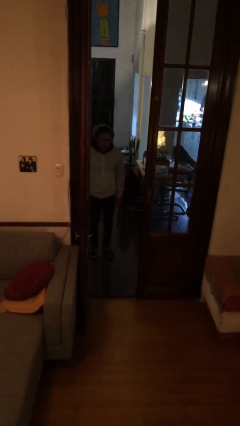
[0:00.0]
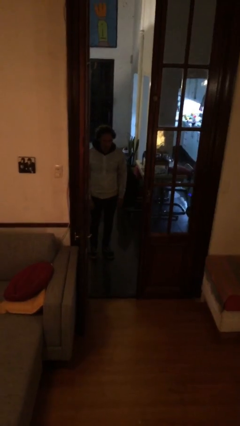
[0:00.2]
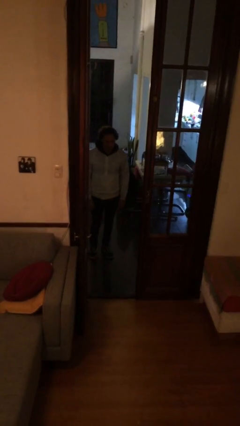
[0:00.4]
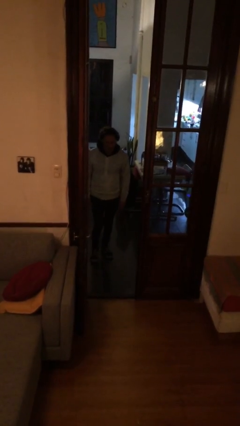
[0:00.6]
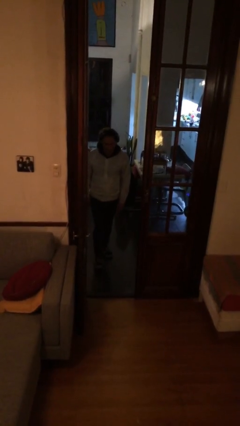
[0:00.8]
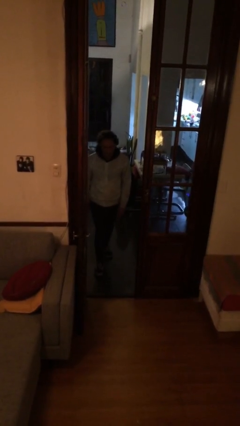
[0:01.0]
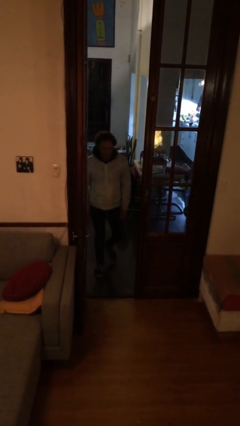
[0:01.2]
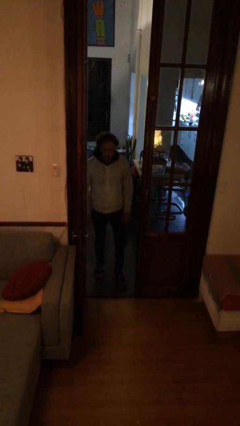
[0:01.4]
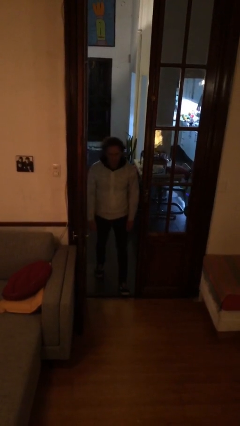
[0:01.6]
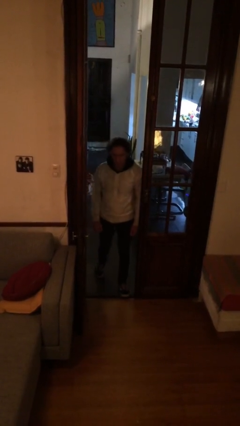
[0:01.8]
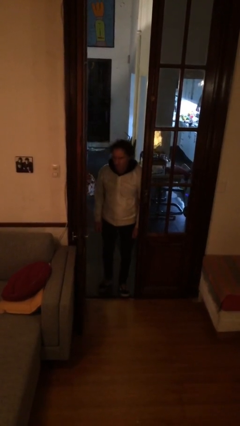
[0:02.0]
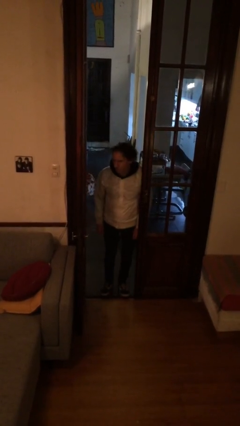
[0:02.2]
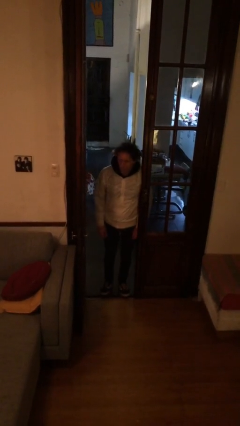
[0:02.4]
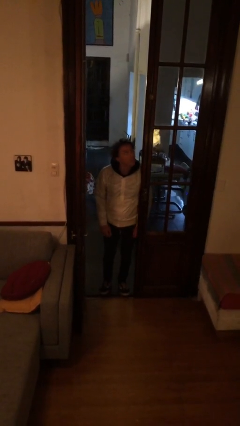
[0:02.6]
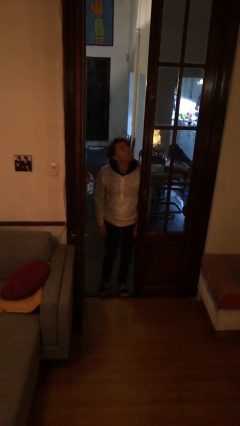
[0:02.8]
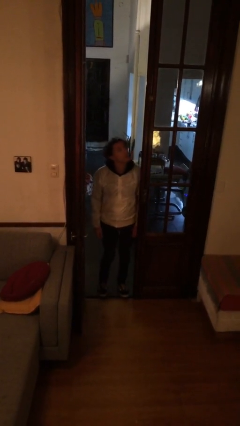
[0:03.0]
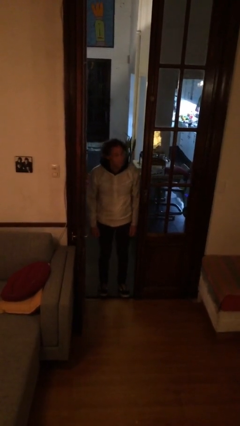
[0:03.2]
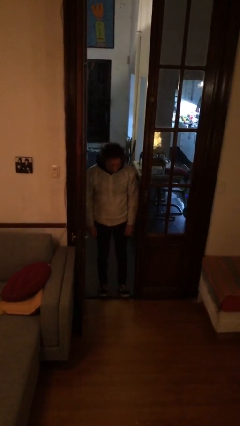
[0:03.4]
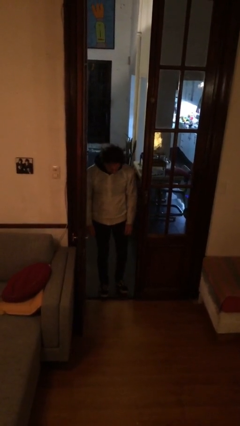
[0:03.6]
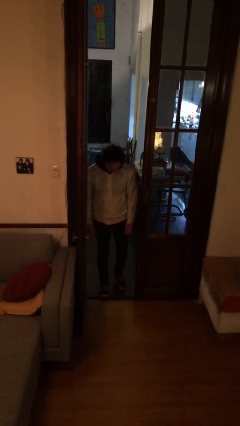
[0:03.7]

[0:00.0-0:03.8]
person bumps into wall

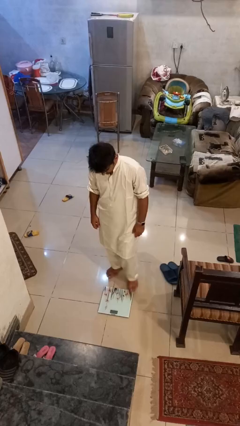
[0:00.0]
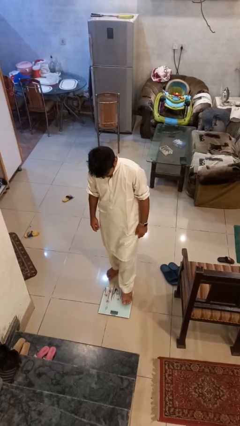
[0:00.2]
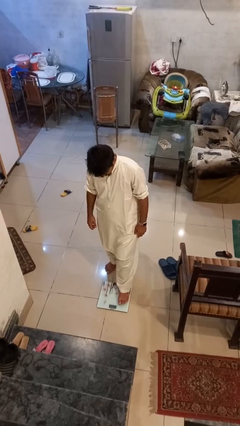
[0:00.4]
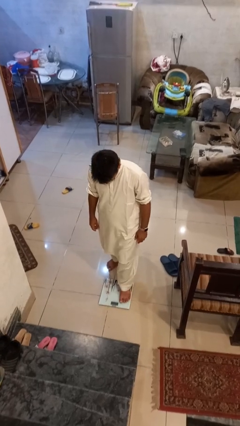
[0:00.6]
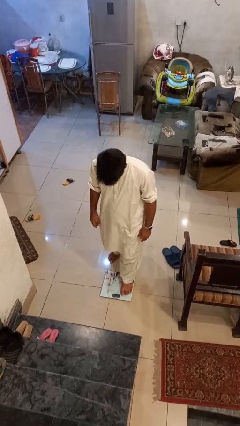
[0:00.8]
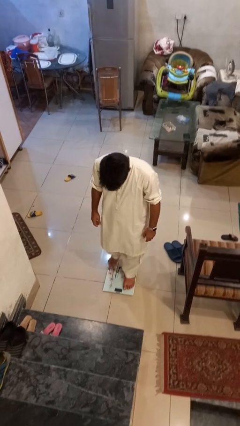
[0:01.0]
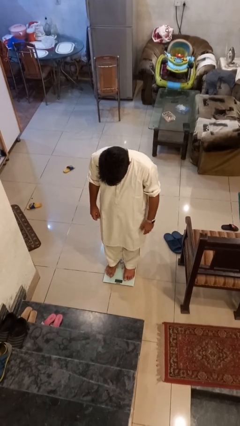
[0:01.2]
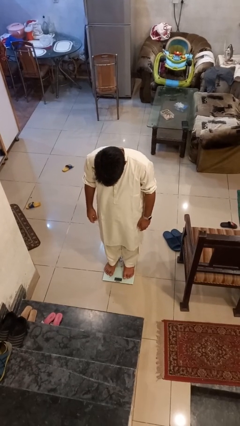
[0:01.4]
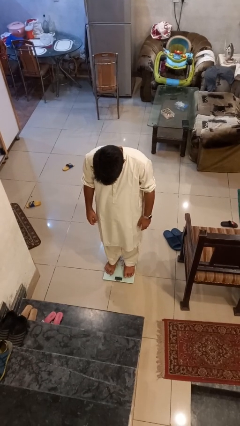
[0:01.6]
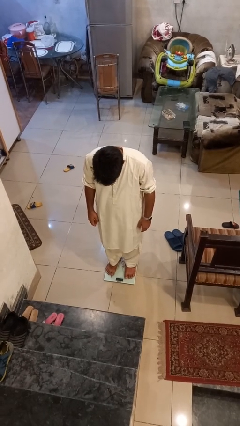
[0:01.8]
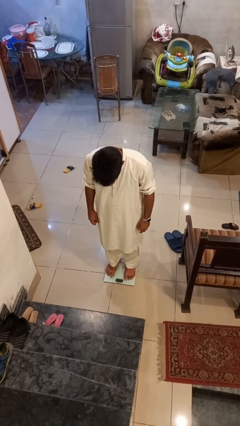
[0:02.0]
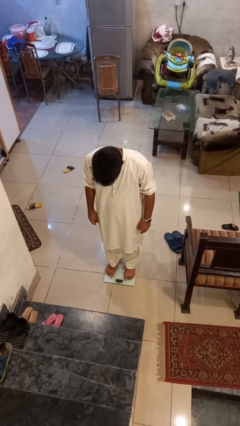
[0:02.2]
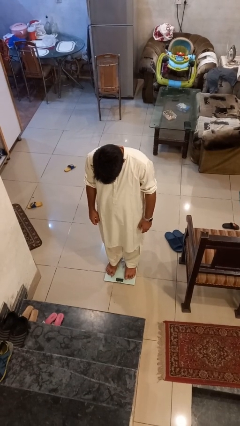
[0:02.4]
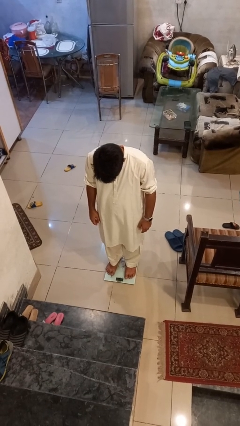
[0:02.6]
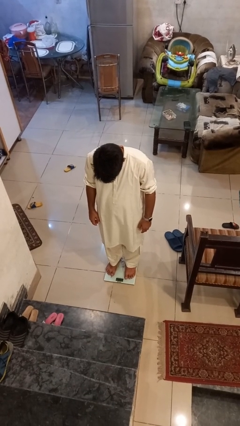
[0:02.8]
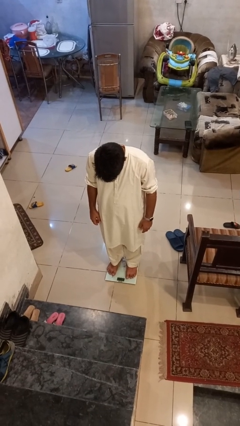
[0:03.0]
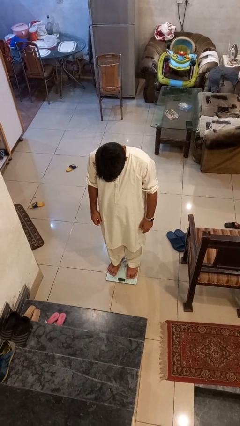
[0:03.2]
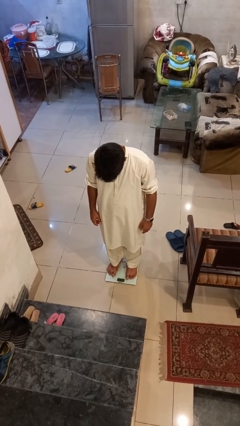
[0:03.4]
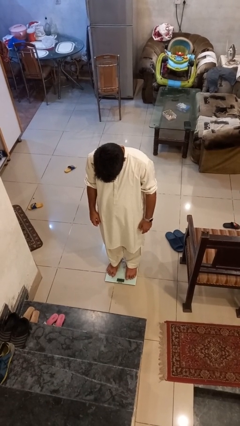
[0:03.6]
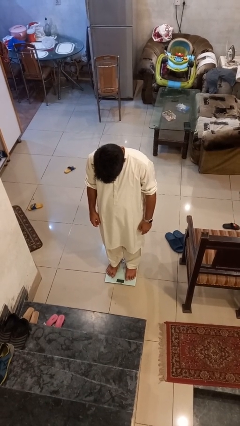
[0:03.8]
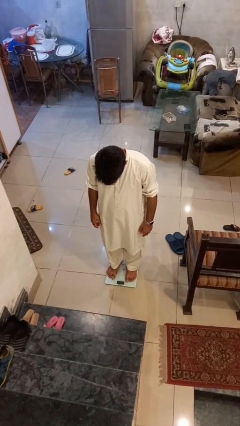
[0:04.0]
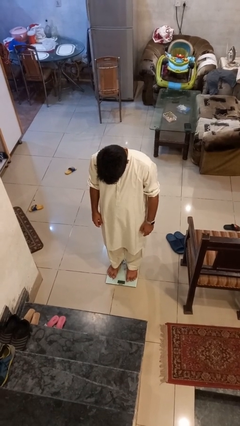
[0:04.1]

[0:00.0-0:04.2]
person uses bodyweight scale

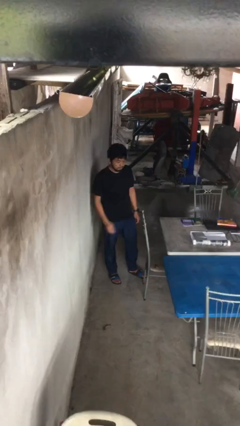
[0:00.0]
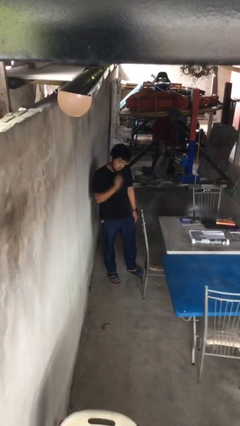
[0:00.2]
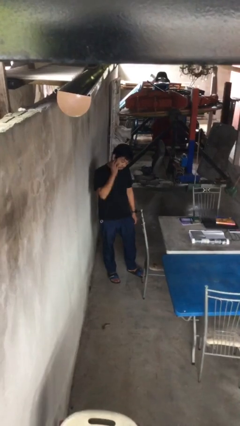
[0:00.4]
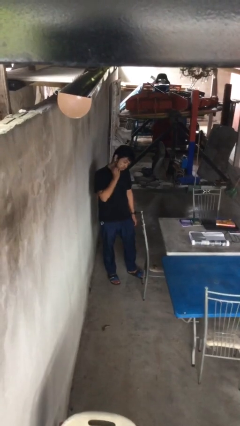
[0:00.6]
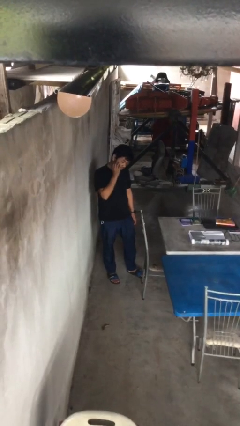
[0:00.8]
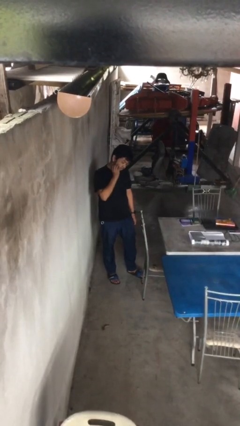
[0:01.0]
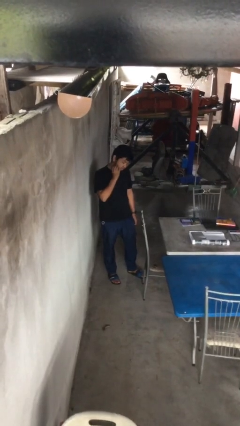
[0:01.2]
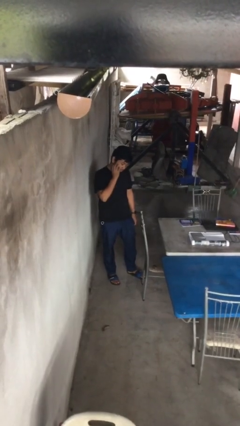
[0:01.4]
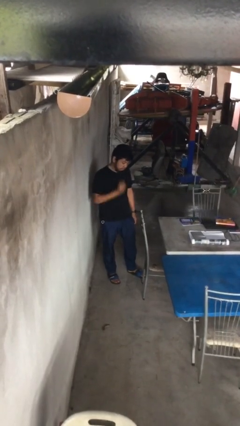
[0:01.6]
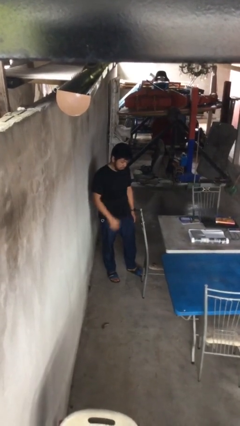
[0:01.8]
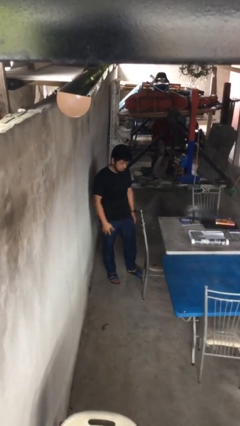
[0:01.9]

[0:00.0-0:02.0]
person scratches face

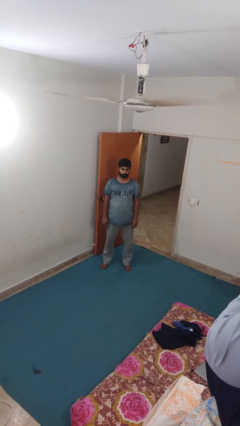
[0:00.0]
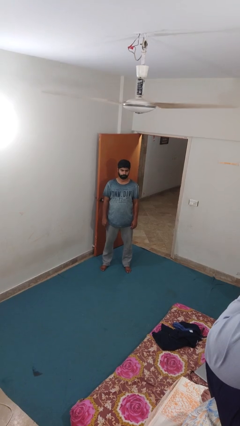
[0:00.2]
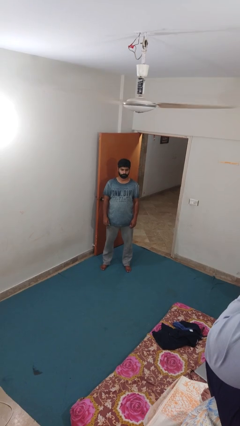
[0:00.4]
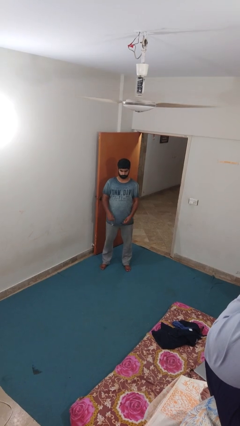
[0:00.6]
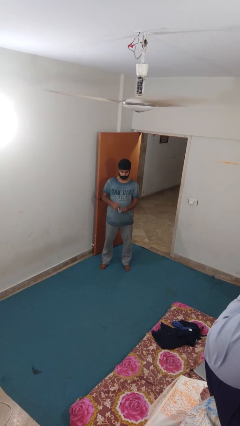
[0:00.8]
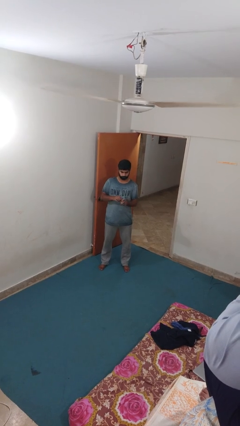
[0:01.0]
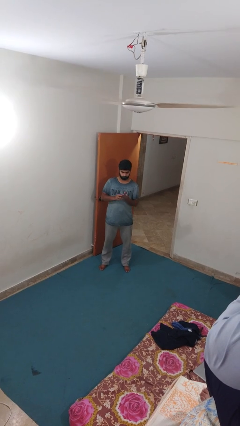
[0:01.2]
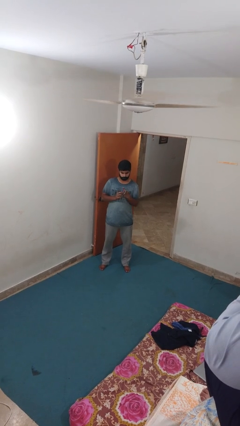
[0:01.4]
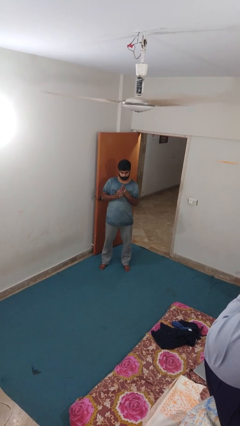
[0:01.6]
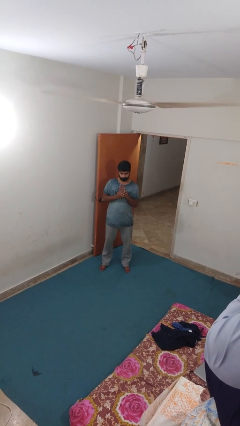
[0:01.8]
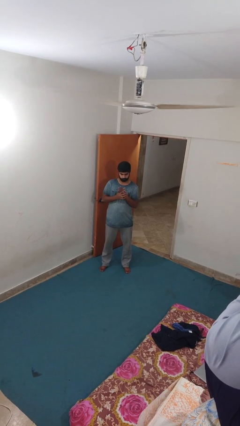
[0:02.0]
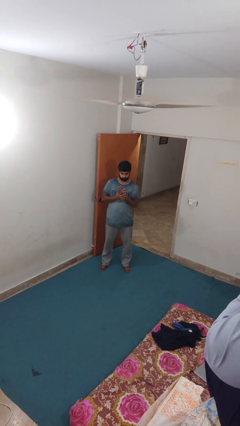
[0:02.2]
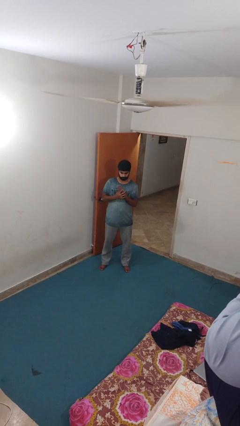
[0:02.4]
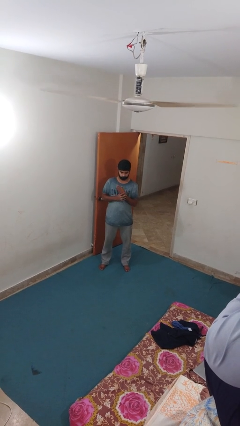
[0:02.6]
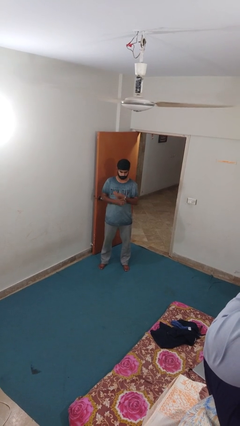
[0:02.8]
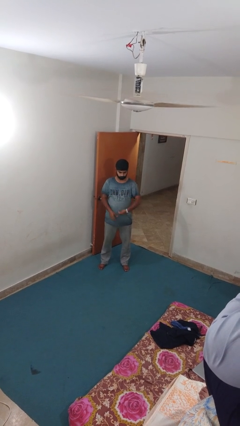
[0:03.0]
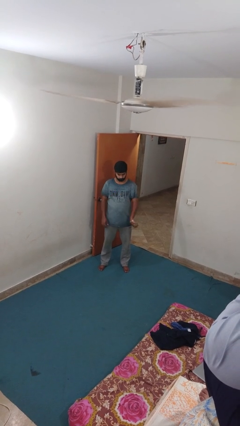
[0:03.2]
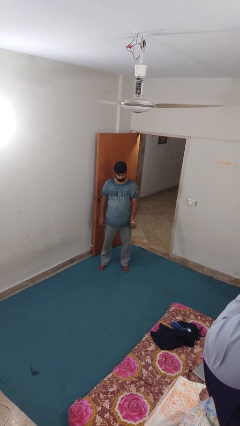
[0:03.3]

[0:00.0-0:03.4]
person puts on wristwatch

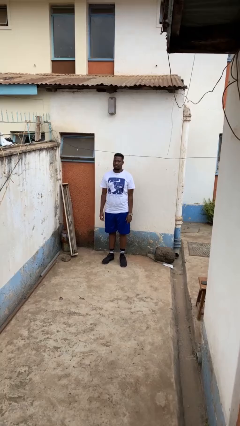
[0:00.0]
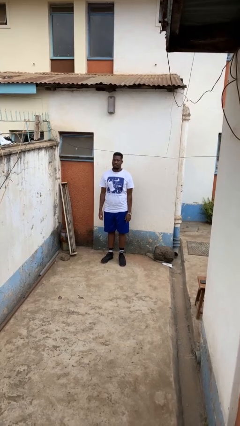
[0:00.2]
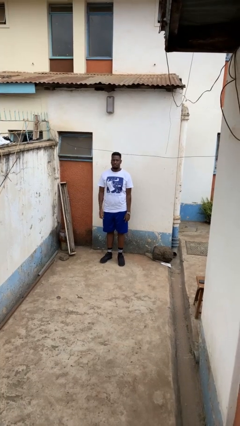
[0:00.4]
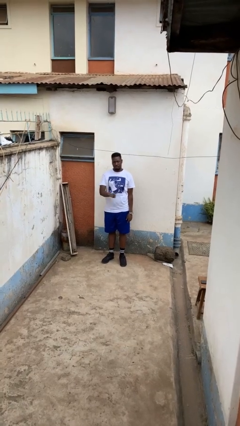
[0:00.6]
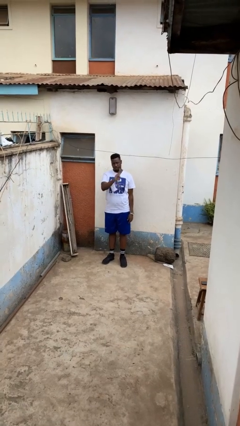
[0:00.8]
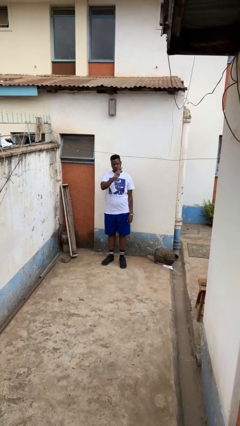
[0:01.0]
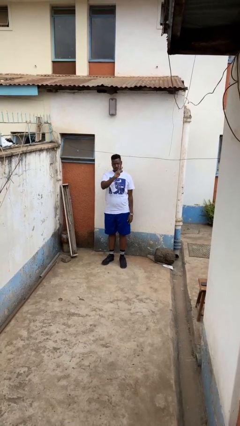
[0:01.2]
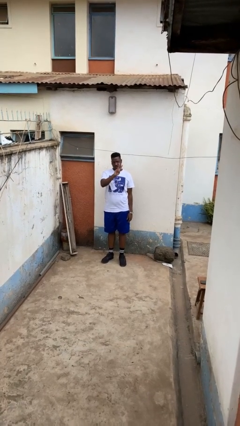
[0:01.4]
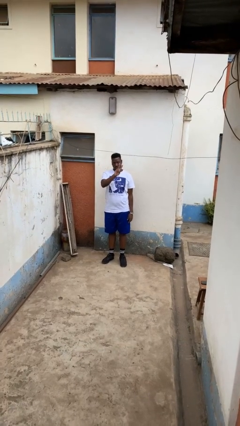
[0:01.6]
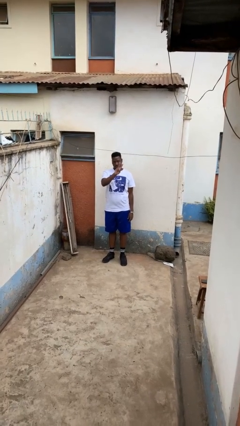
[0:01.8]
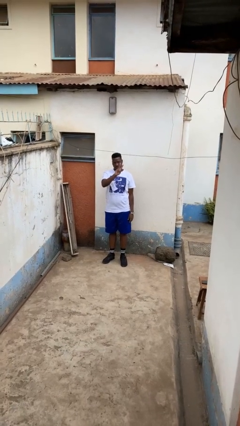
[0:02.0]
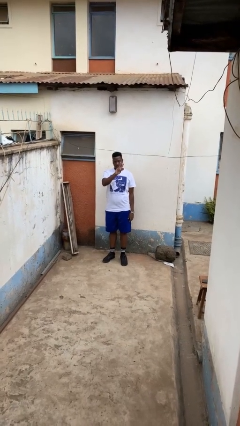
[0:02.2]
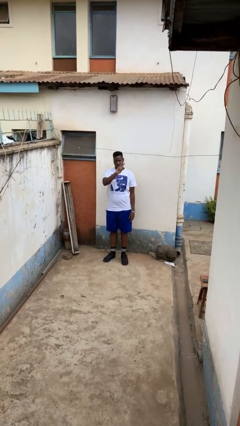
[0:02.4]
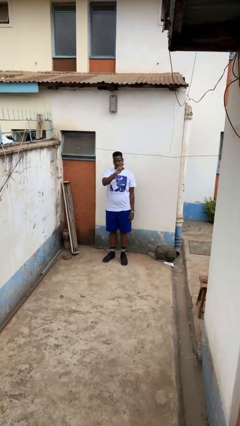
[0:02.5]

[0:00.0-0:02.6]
person gestures peace

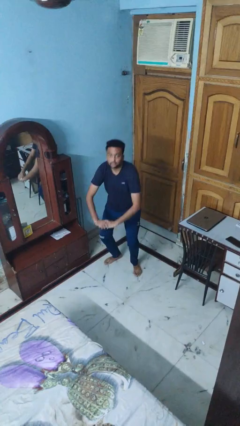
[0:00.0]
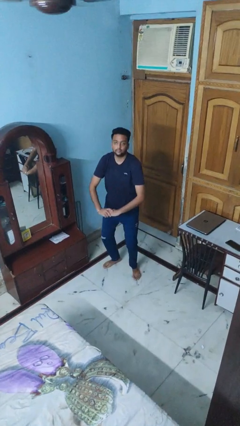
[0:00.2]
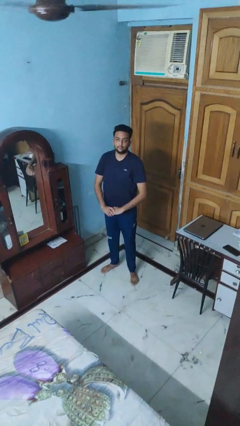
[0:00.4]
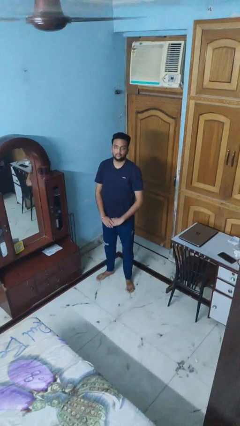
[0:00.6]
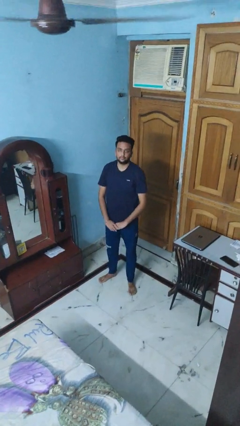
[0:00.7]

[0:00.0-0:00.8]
person stands up

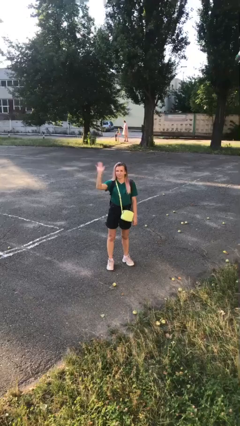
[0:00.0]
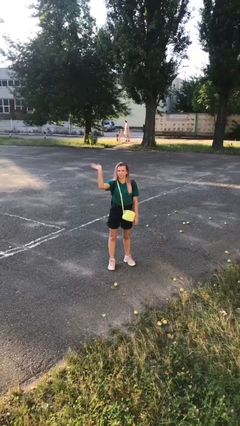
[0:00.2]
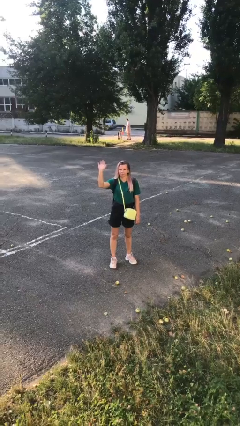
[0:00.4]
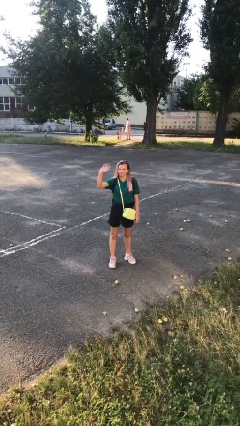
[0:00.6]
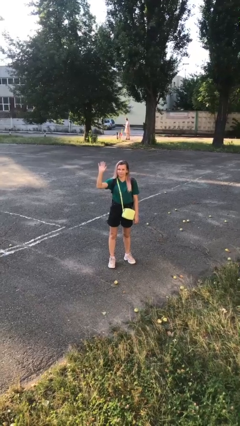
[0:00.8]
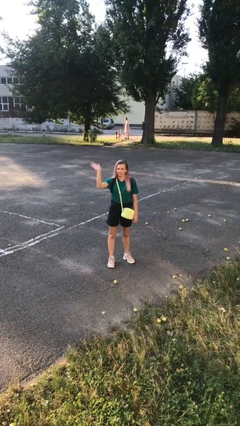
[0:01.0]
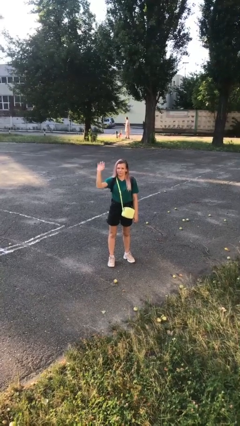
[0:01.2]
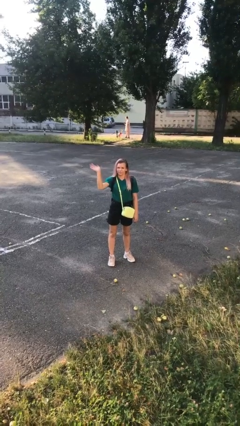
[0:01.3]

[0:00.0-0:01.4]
person waves at person
